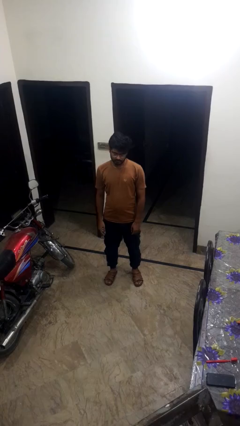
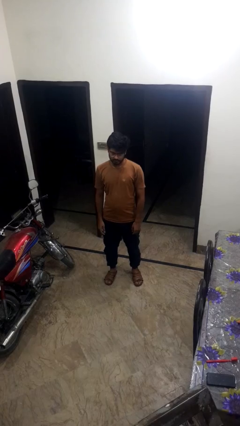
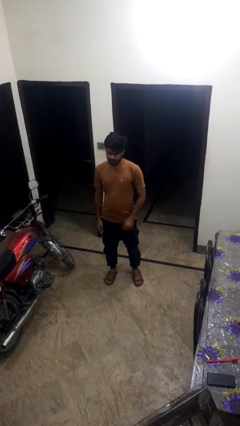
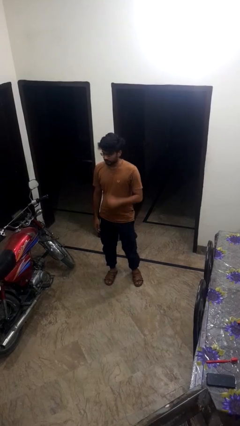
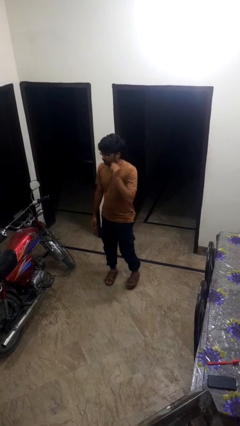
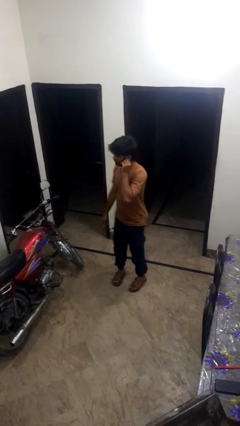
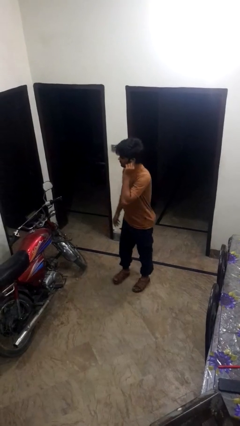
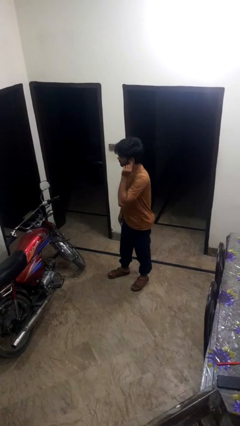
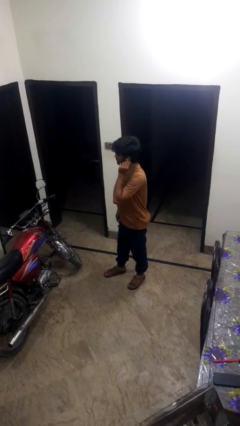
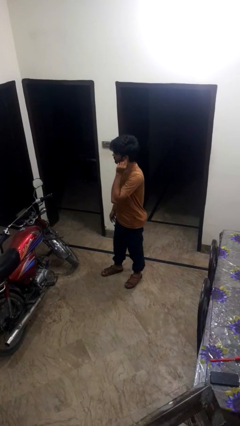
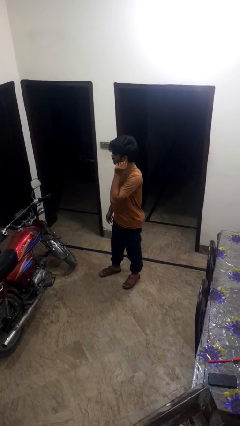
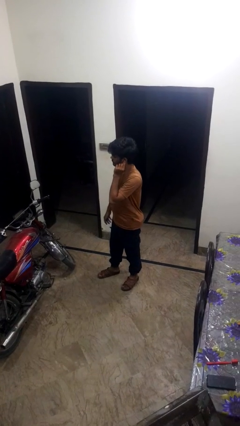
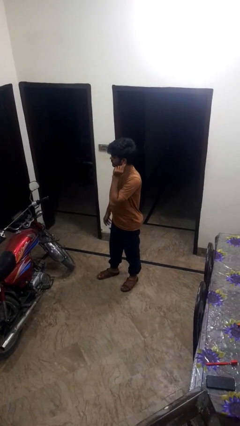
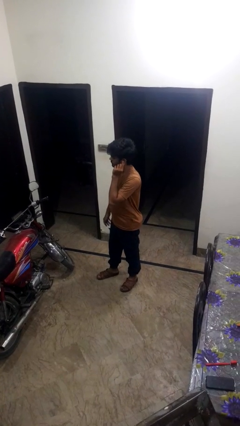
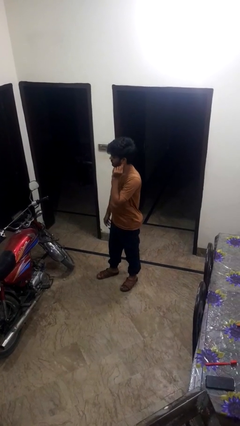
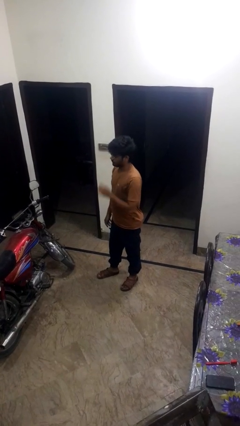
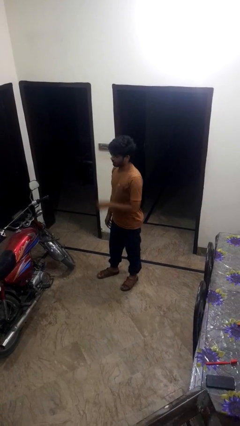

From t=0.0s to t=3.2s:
person touches earlobe

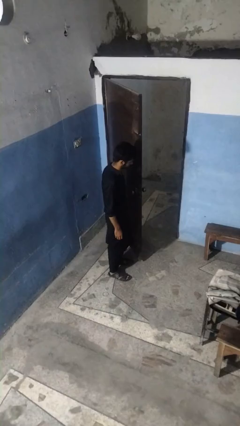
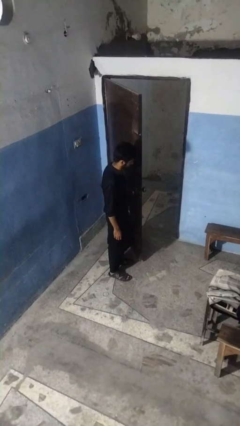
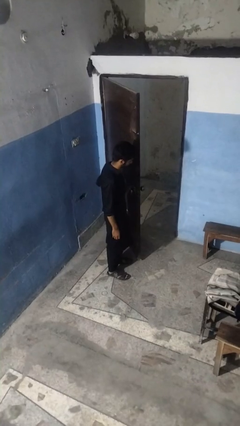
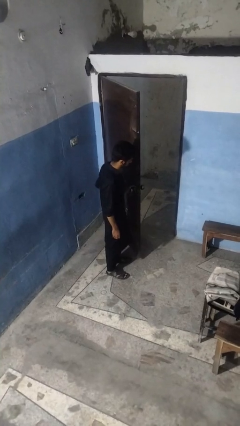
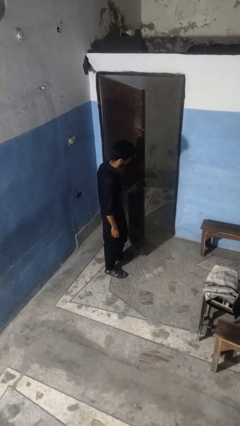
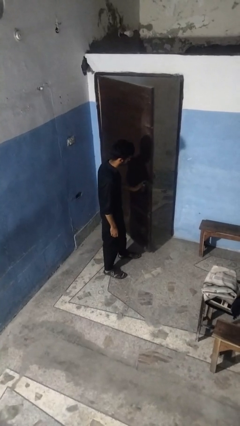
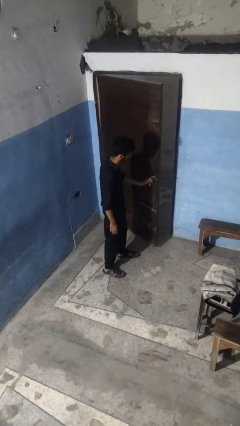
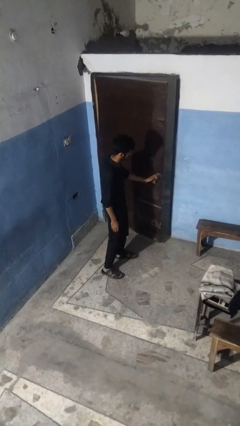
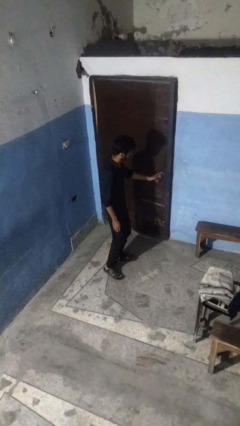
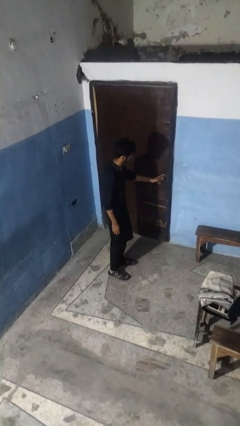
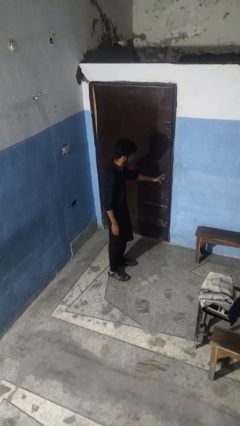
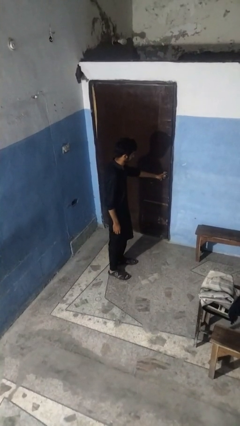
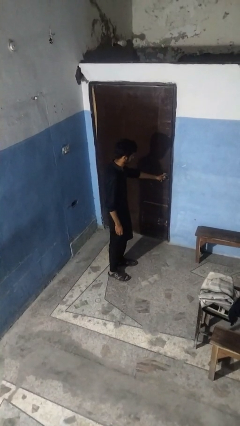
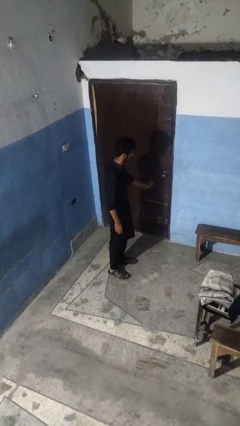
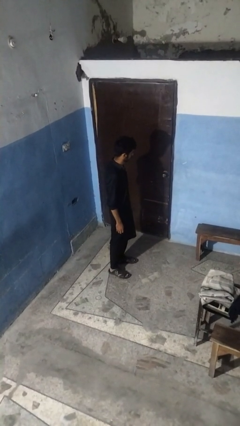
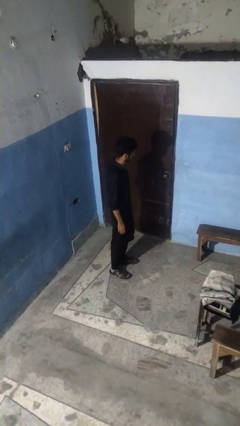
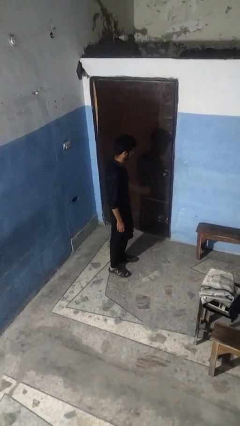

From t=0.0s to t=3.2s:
person closes facility door

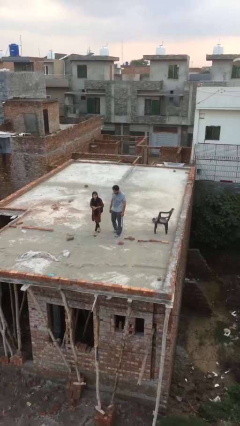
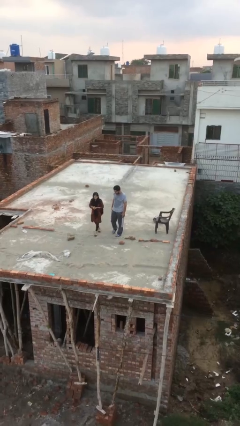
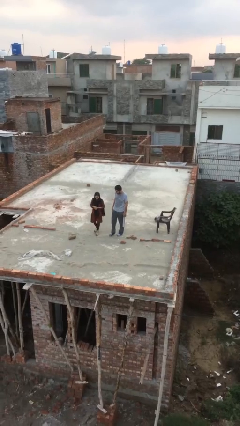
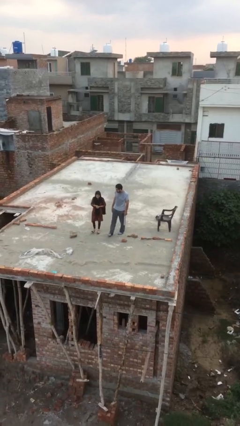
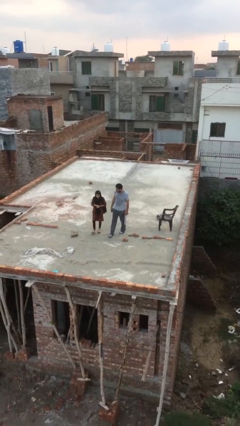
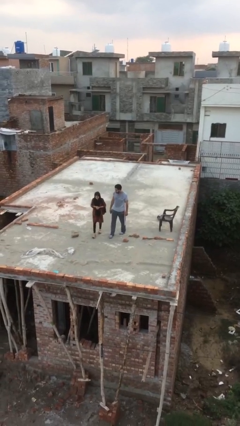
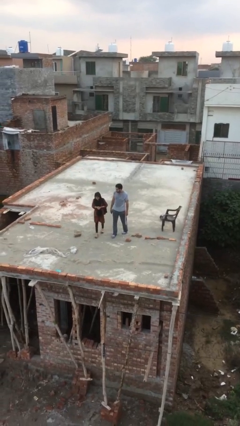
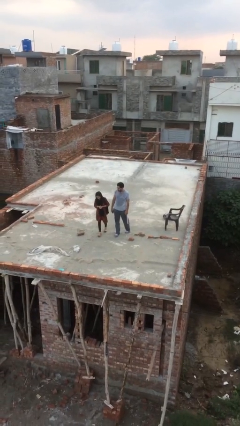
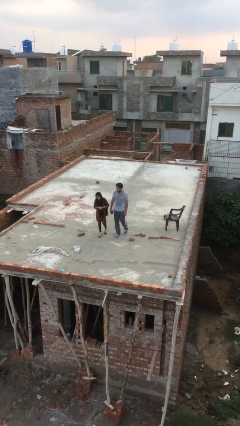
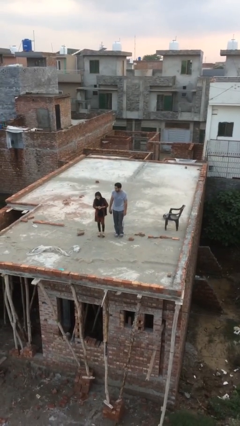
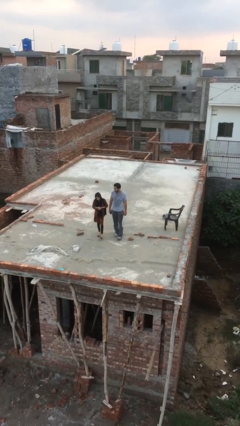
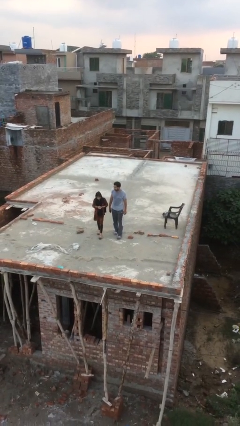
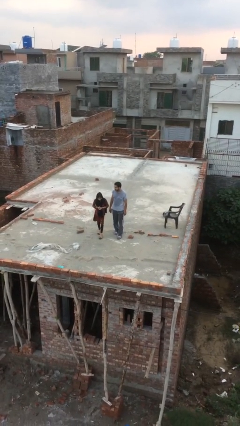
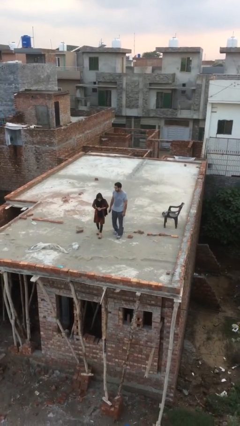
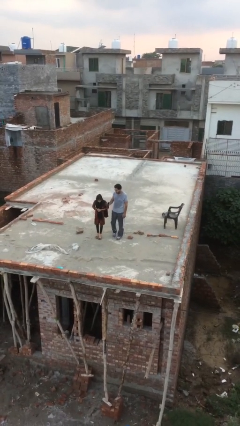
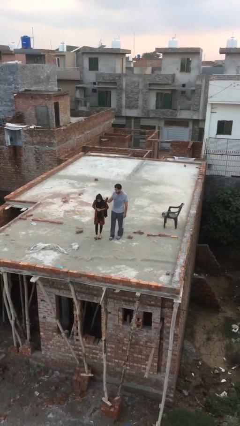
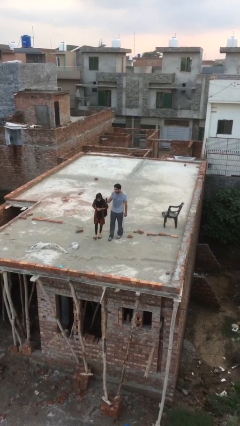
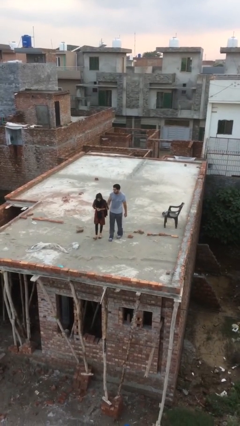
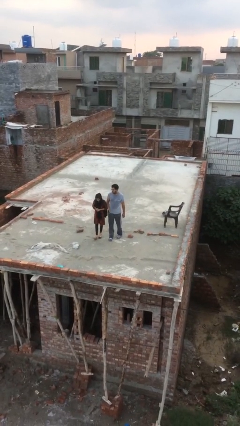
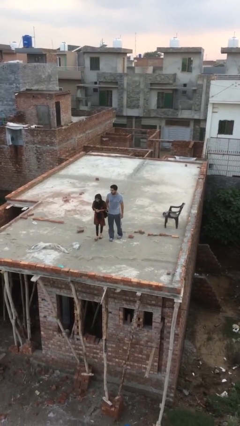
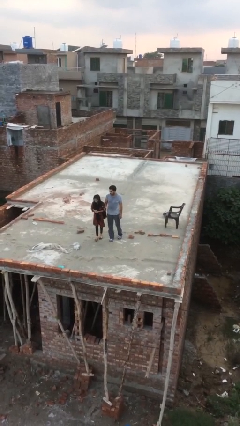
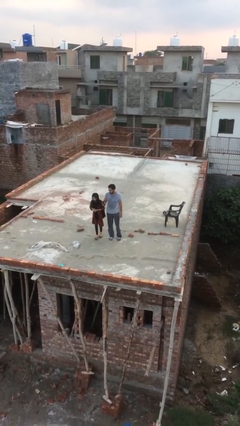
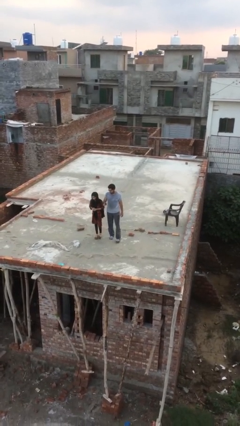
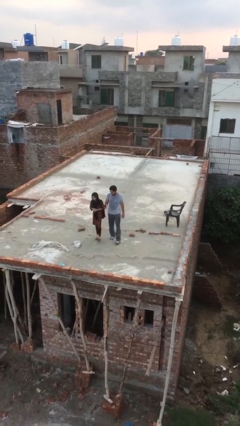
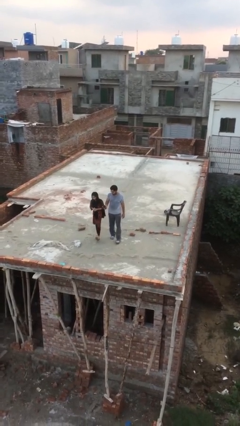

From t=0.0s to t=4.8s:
person talks to person

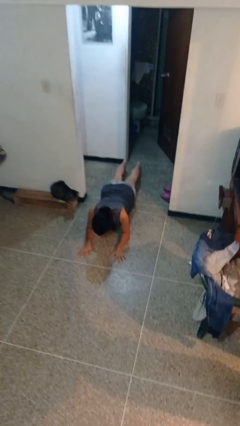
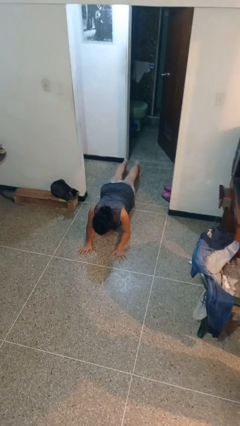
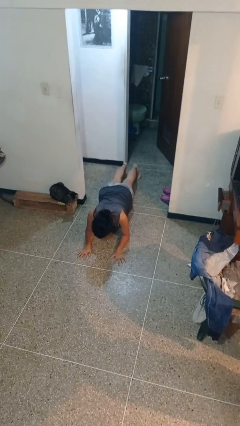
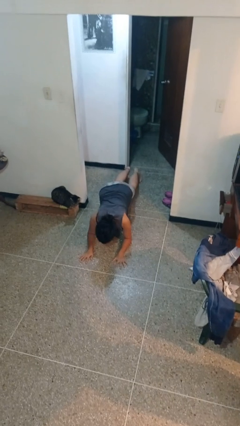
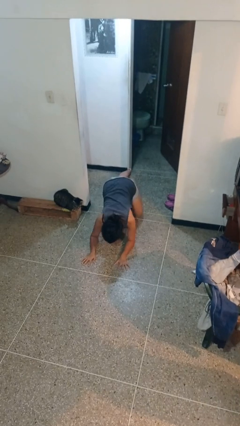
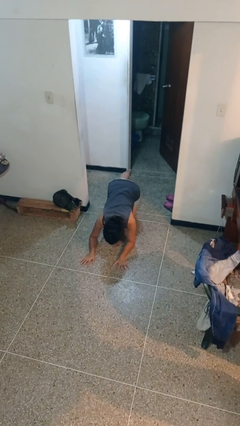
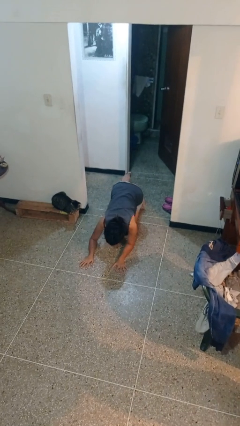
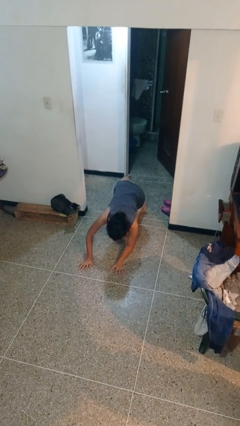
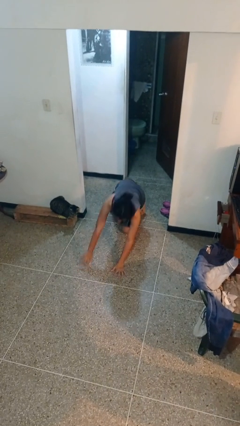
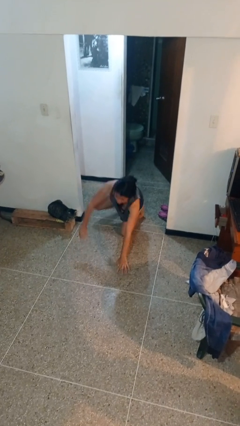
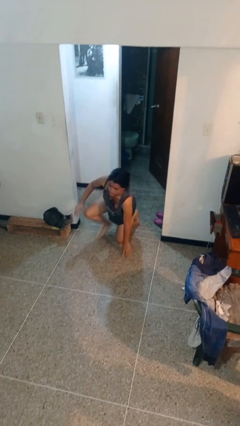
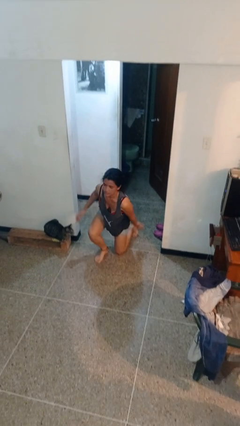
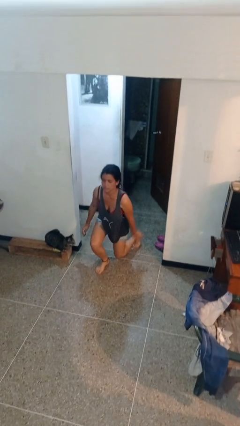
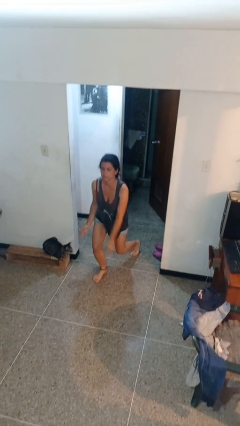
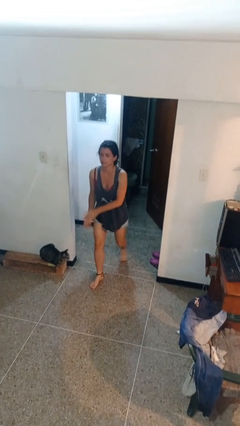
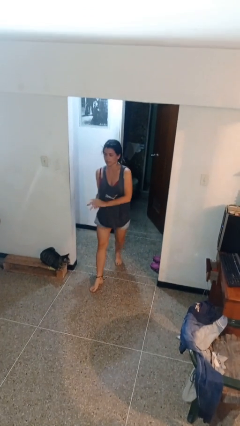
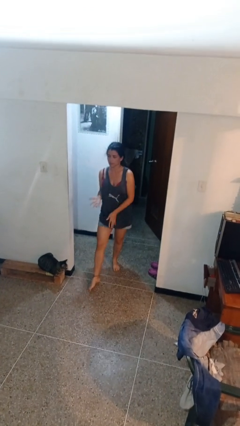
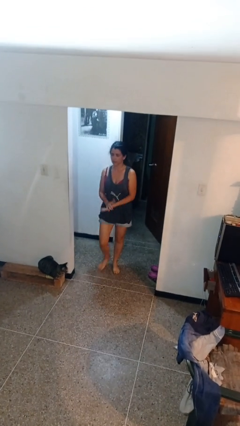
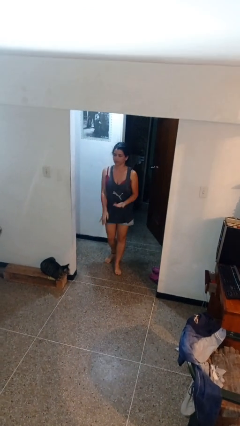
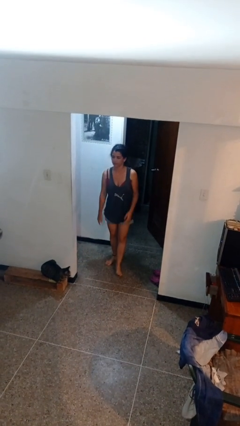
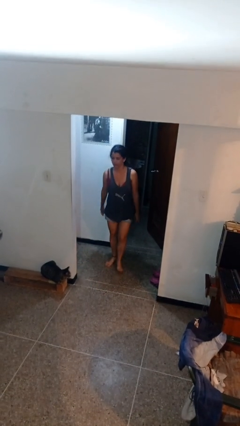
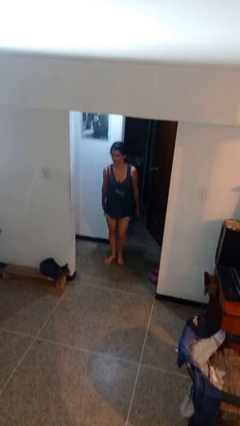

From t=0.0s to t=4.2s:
person stands up from floor

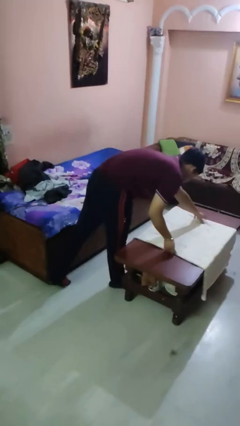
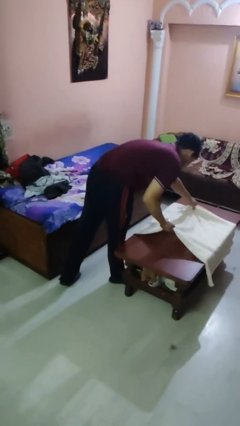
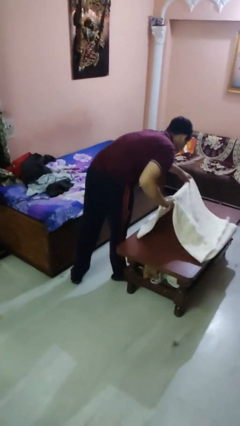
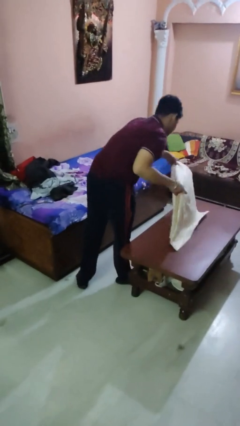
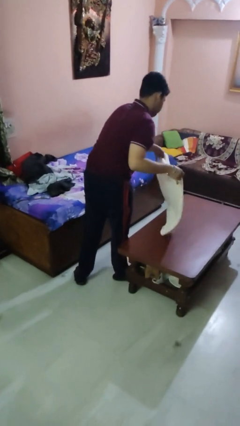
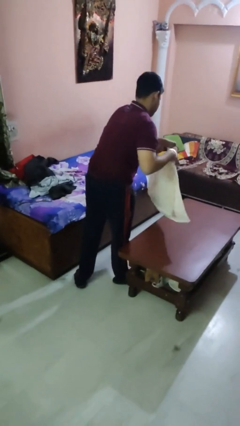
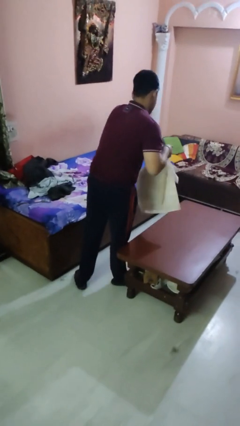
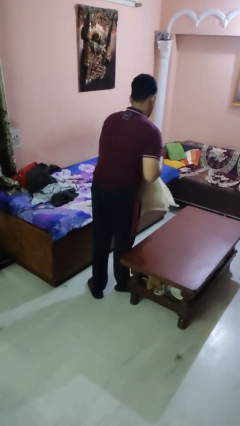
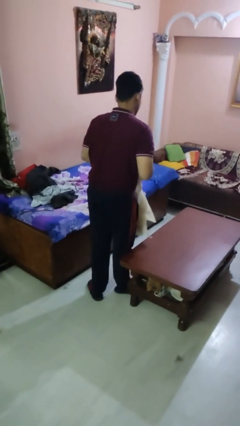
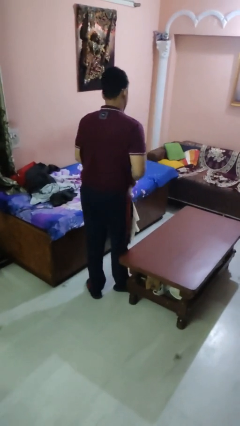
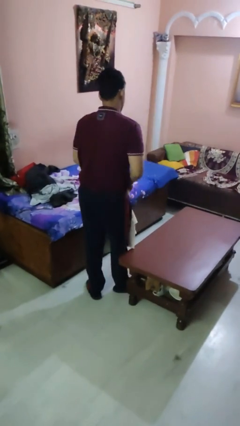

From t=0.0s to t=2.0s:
person folds tablecloth
